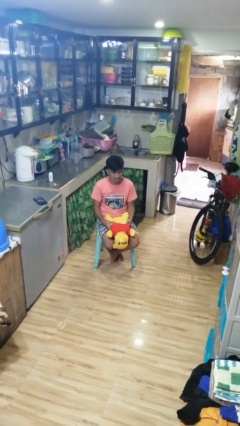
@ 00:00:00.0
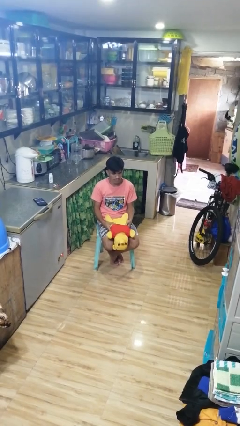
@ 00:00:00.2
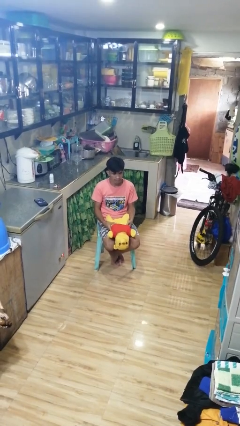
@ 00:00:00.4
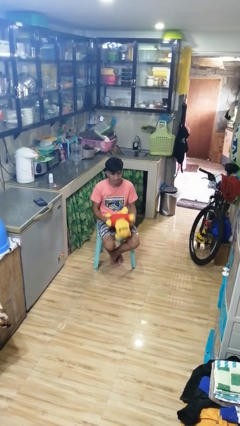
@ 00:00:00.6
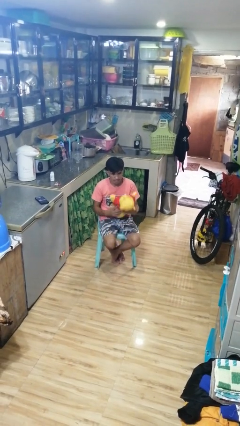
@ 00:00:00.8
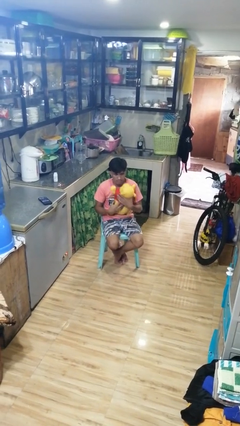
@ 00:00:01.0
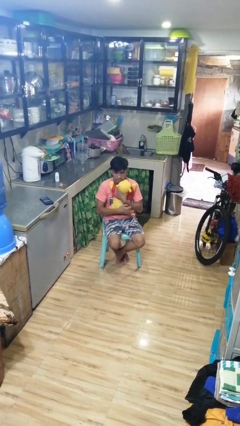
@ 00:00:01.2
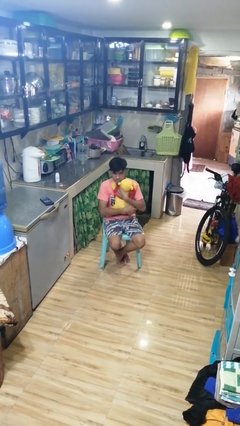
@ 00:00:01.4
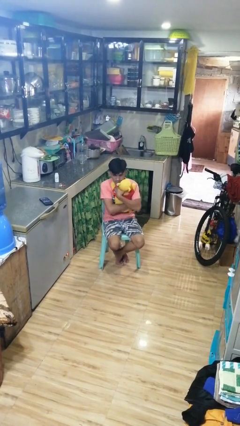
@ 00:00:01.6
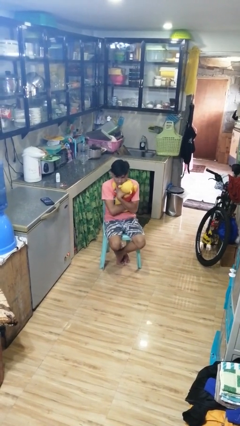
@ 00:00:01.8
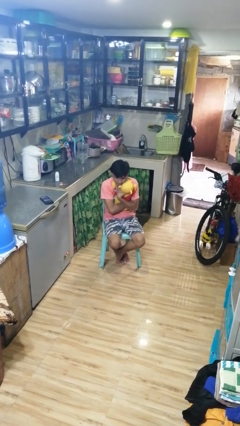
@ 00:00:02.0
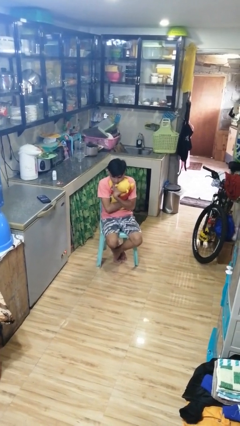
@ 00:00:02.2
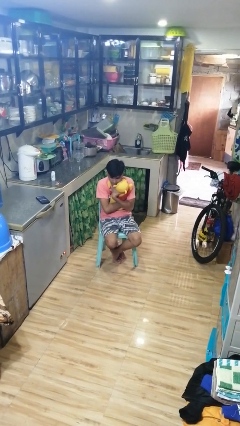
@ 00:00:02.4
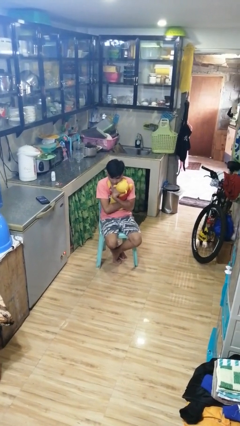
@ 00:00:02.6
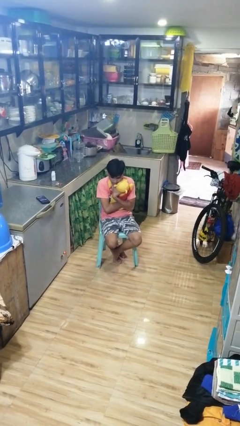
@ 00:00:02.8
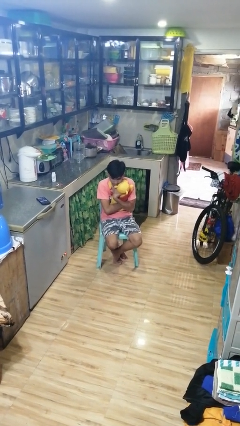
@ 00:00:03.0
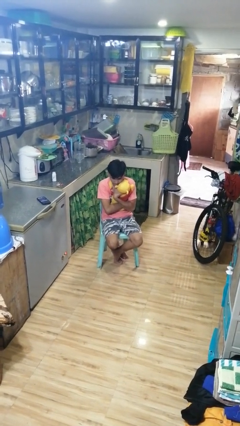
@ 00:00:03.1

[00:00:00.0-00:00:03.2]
person hugs stuffed animal

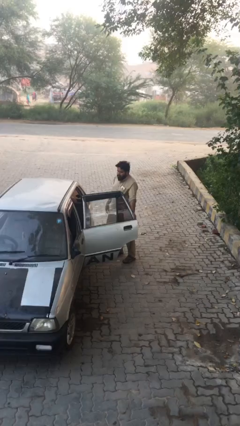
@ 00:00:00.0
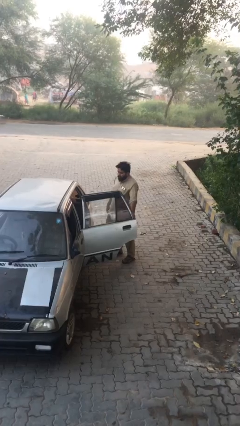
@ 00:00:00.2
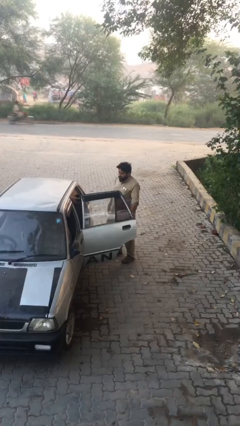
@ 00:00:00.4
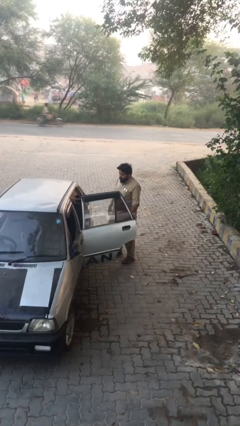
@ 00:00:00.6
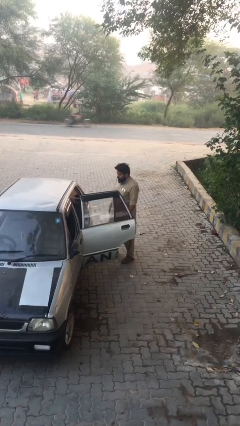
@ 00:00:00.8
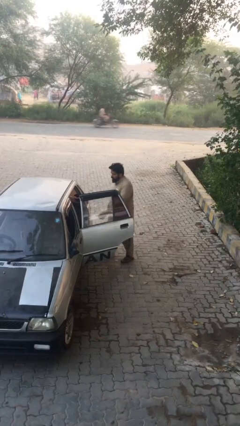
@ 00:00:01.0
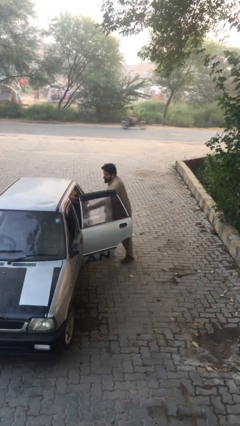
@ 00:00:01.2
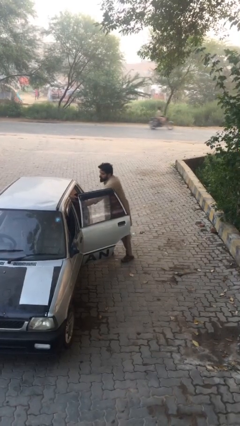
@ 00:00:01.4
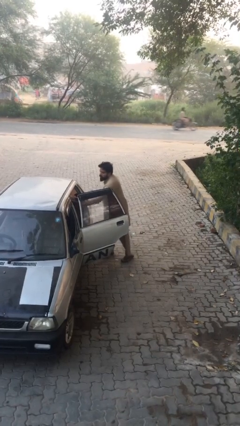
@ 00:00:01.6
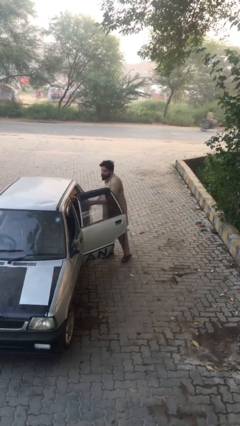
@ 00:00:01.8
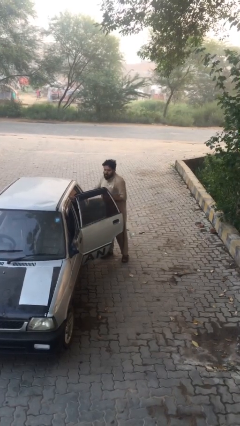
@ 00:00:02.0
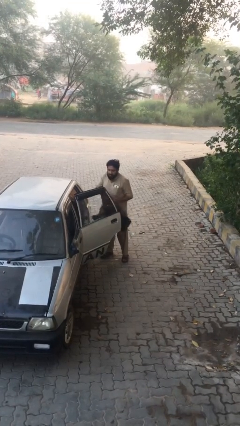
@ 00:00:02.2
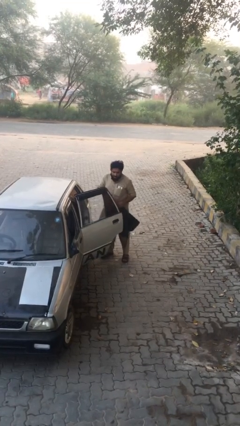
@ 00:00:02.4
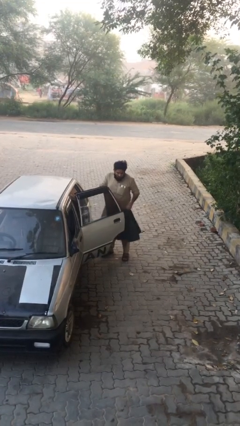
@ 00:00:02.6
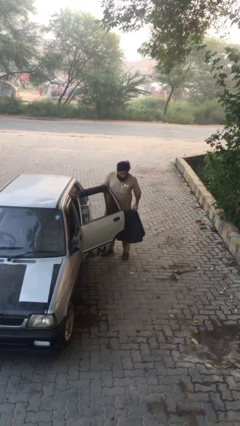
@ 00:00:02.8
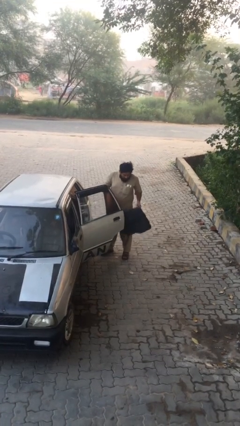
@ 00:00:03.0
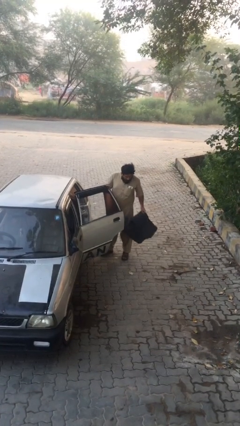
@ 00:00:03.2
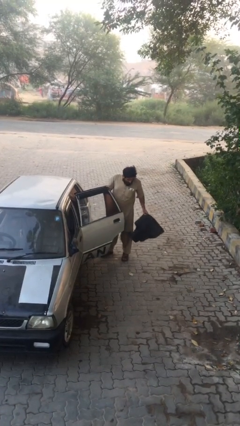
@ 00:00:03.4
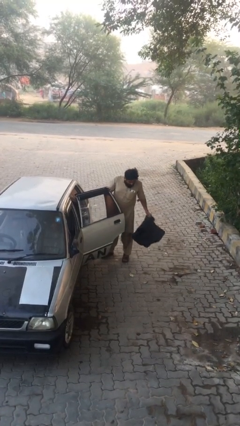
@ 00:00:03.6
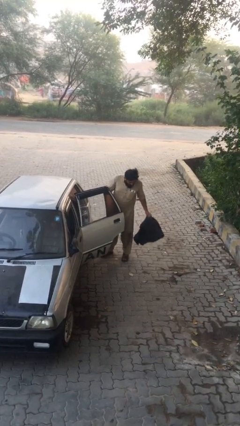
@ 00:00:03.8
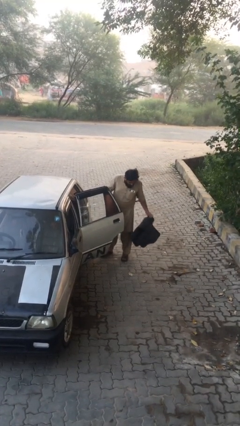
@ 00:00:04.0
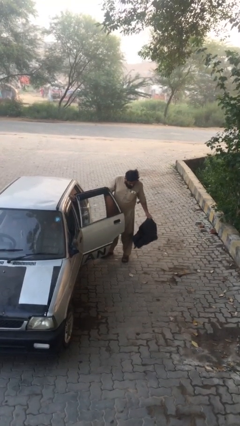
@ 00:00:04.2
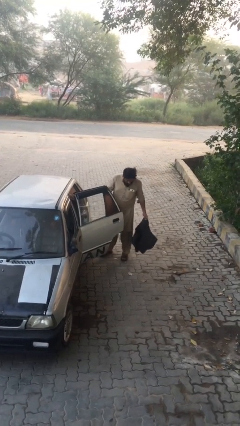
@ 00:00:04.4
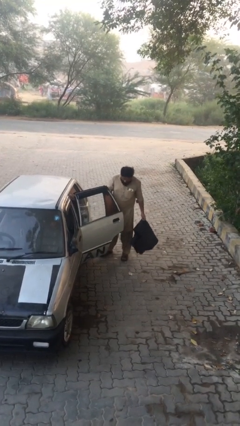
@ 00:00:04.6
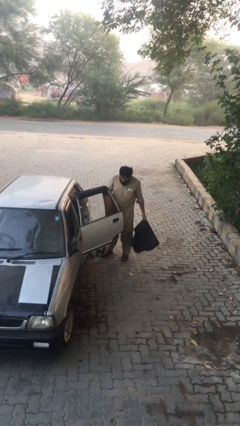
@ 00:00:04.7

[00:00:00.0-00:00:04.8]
person unloads car

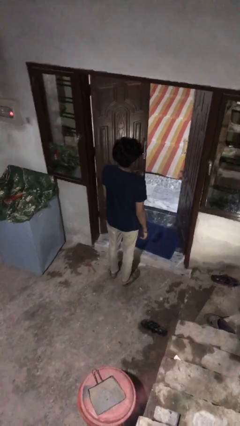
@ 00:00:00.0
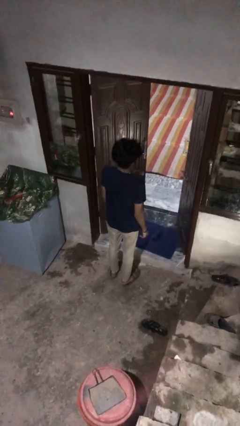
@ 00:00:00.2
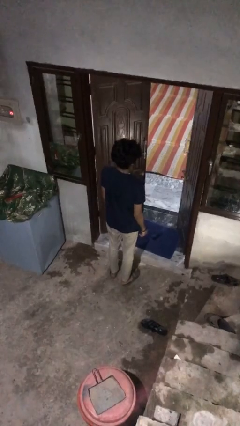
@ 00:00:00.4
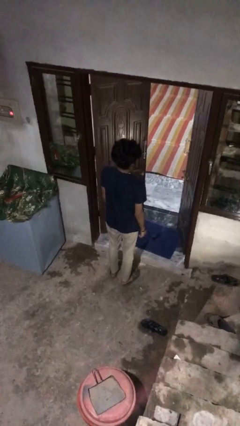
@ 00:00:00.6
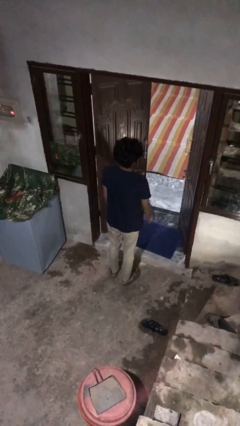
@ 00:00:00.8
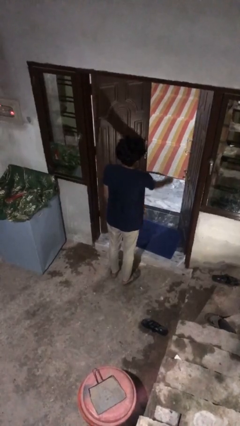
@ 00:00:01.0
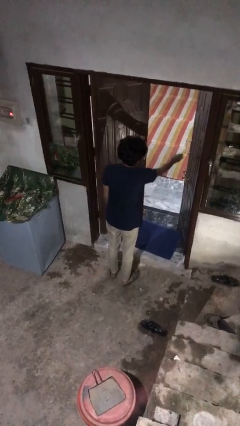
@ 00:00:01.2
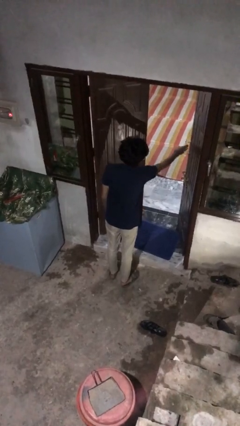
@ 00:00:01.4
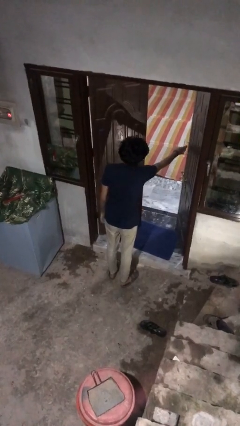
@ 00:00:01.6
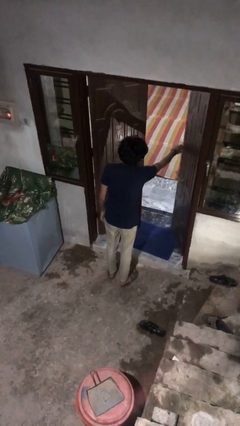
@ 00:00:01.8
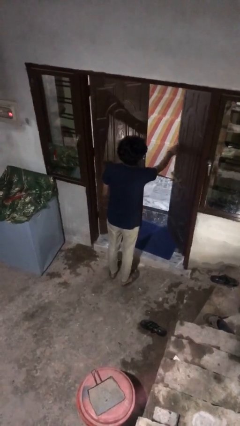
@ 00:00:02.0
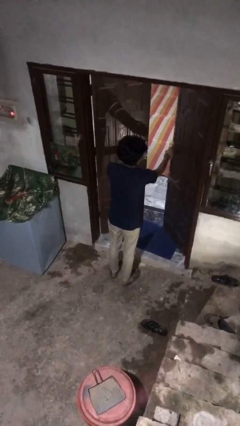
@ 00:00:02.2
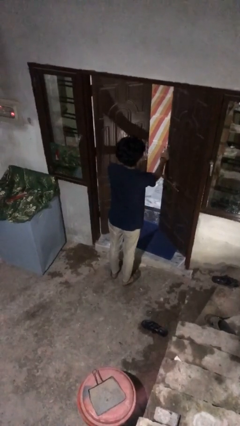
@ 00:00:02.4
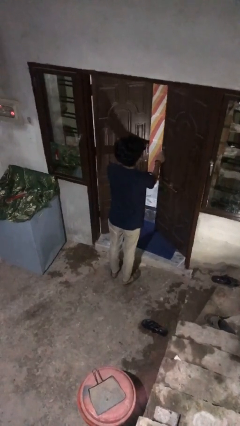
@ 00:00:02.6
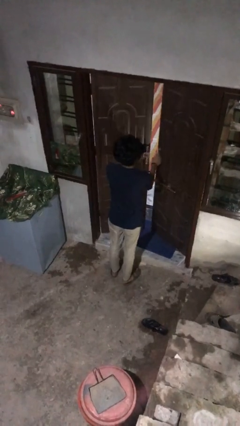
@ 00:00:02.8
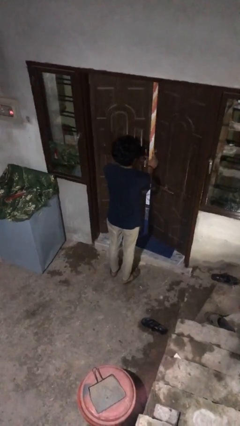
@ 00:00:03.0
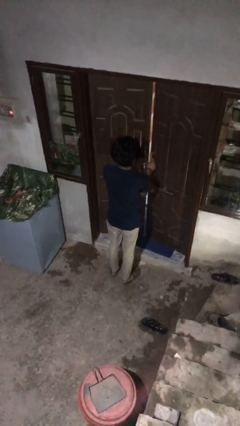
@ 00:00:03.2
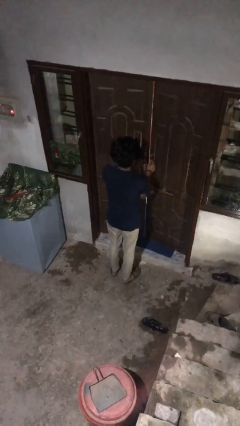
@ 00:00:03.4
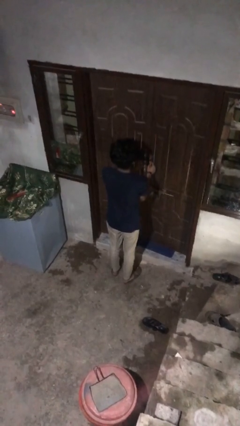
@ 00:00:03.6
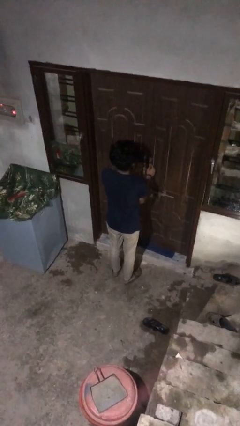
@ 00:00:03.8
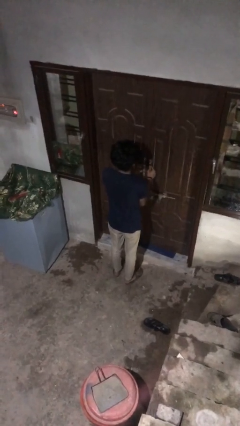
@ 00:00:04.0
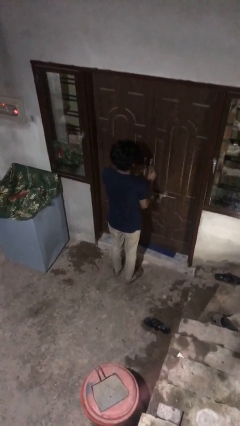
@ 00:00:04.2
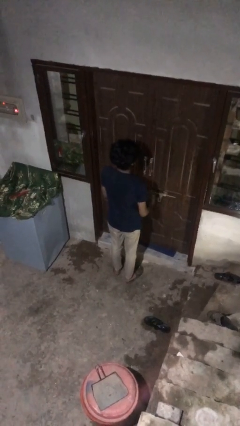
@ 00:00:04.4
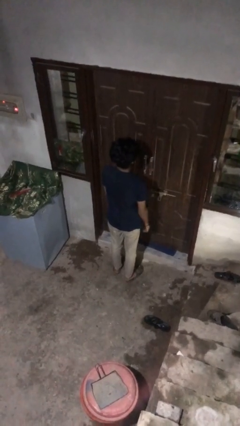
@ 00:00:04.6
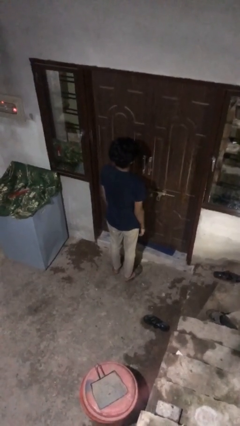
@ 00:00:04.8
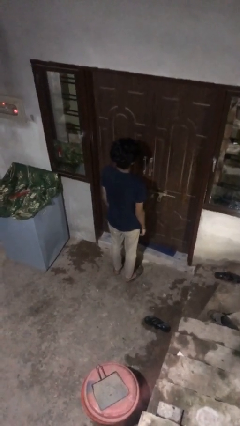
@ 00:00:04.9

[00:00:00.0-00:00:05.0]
person closes facility door

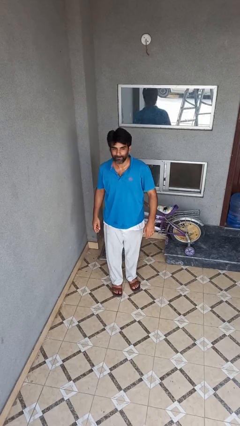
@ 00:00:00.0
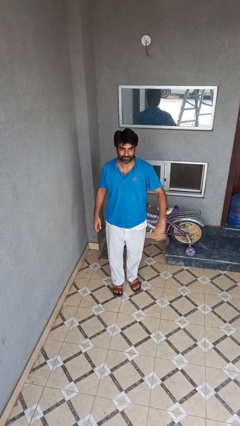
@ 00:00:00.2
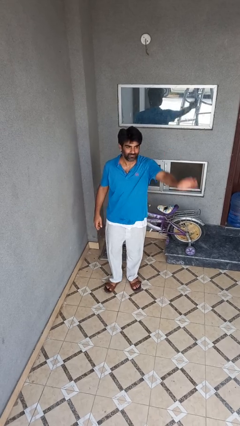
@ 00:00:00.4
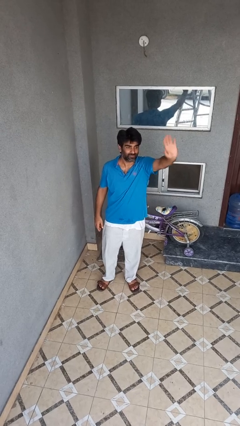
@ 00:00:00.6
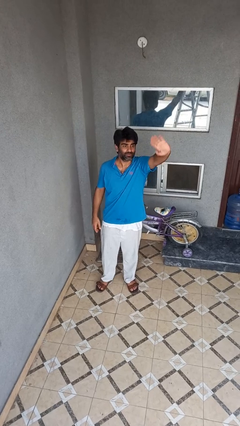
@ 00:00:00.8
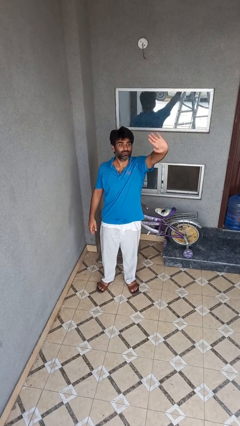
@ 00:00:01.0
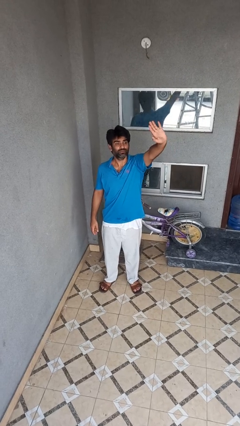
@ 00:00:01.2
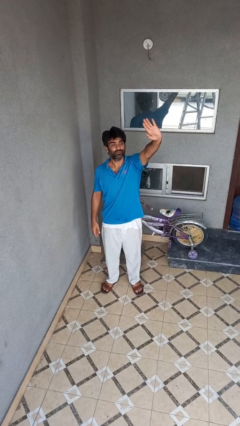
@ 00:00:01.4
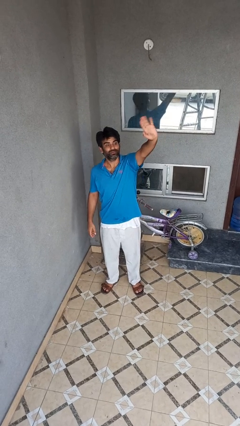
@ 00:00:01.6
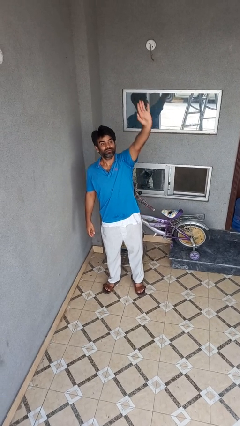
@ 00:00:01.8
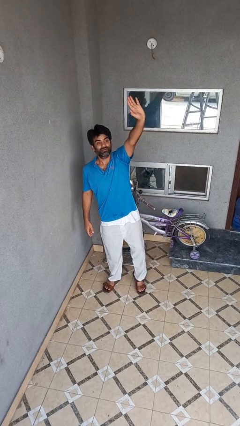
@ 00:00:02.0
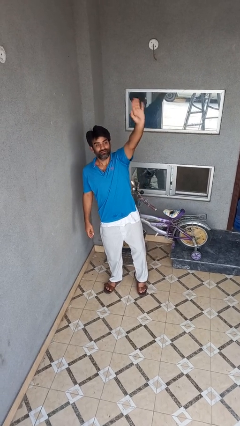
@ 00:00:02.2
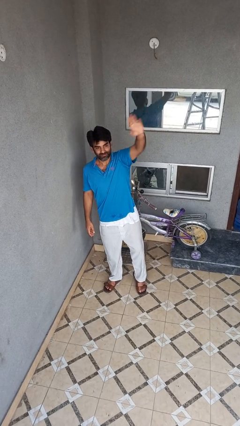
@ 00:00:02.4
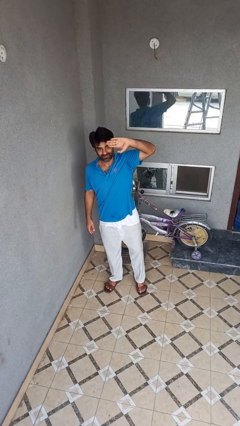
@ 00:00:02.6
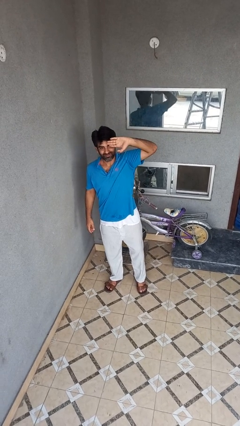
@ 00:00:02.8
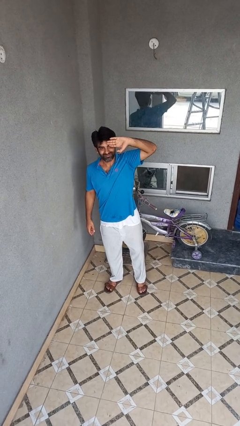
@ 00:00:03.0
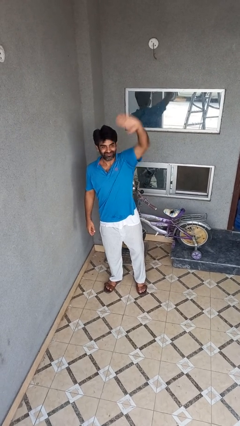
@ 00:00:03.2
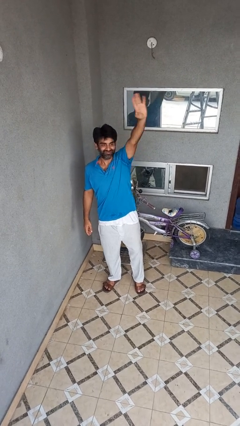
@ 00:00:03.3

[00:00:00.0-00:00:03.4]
person waves at person

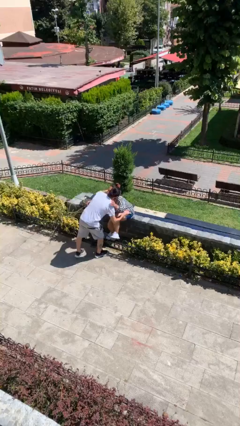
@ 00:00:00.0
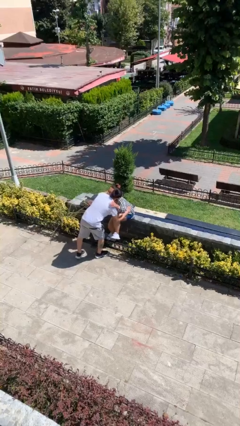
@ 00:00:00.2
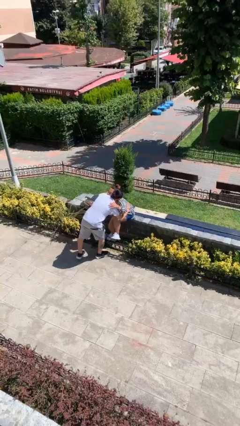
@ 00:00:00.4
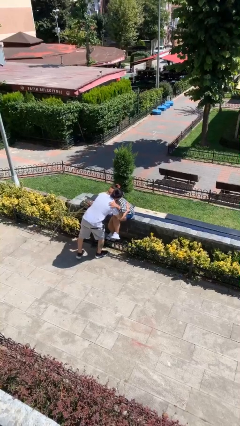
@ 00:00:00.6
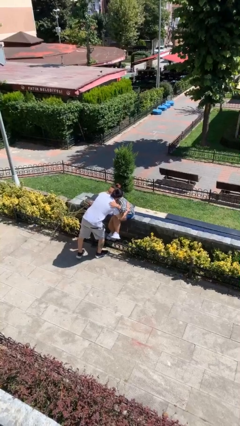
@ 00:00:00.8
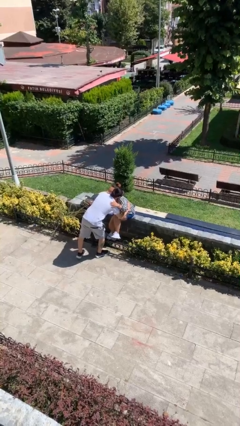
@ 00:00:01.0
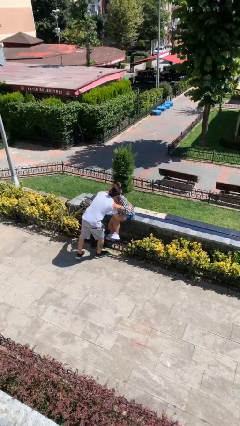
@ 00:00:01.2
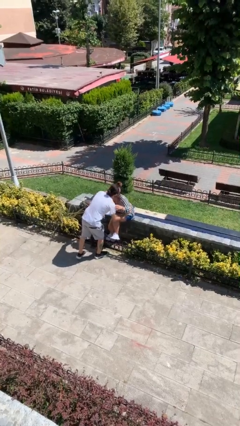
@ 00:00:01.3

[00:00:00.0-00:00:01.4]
person embraces person
